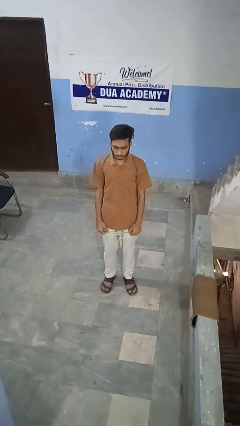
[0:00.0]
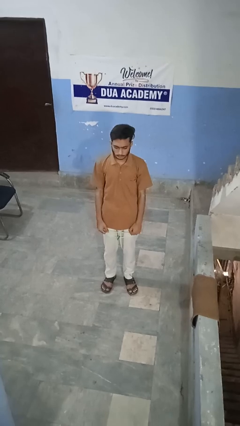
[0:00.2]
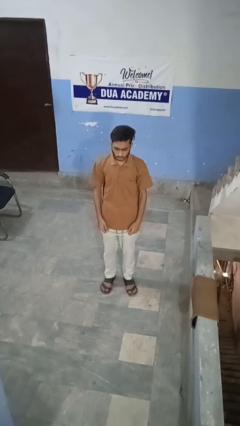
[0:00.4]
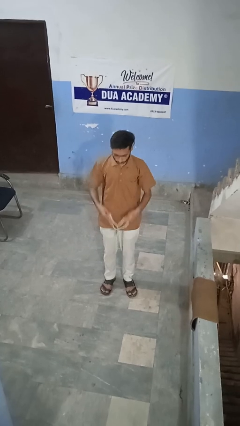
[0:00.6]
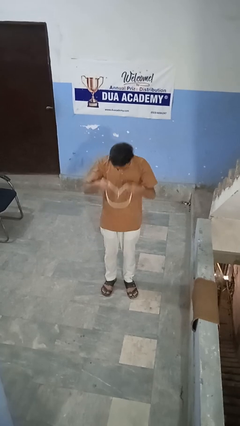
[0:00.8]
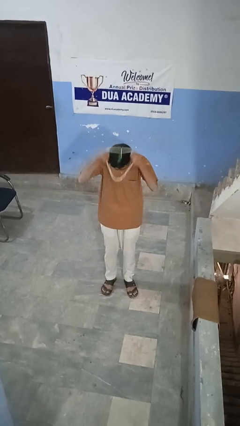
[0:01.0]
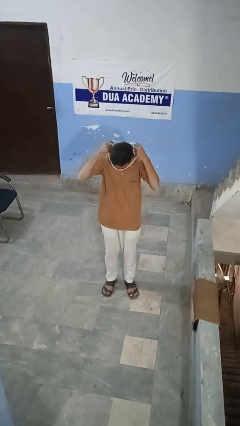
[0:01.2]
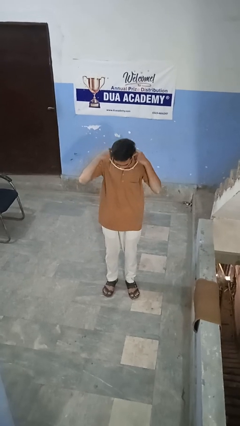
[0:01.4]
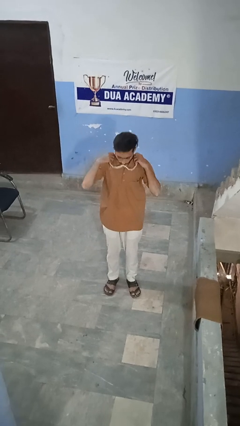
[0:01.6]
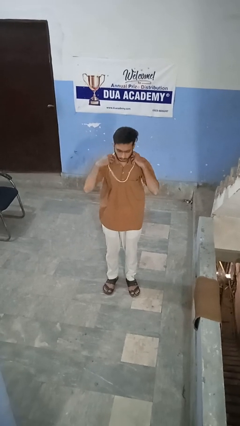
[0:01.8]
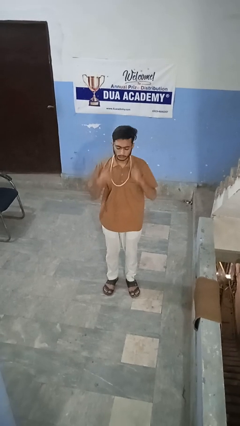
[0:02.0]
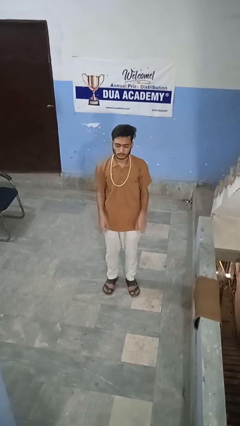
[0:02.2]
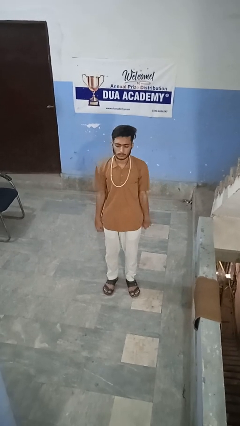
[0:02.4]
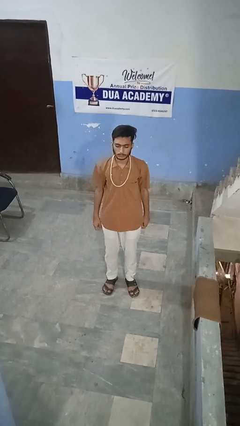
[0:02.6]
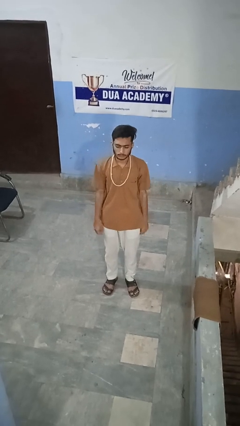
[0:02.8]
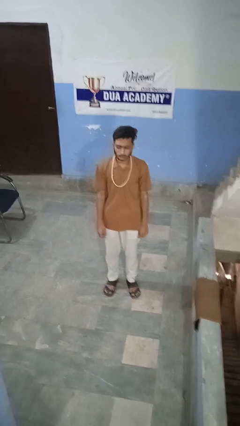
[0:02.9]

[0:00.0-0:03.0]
person puts on necklace

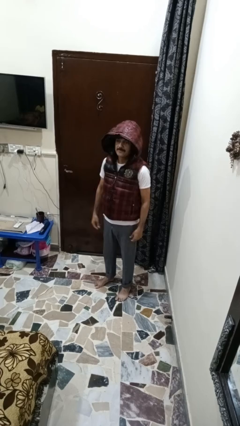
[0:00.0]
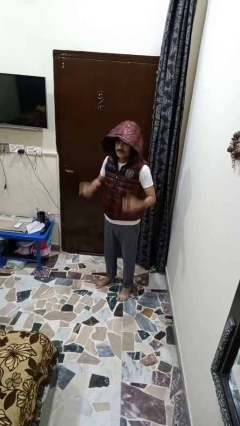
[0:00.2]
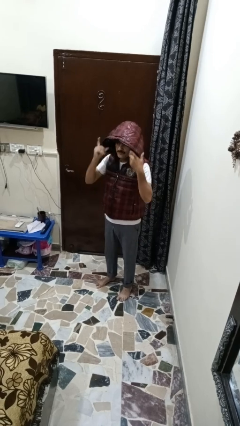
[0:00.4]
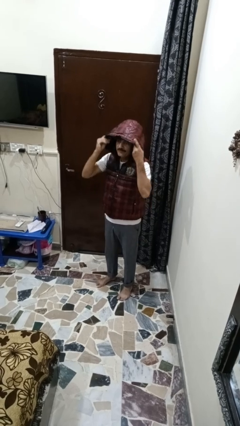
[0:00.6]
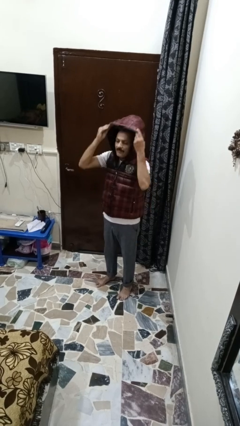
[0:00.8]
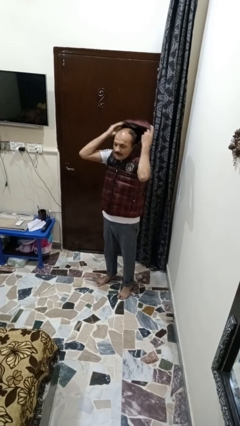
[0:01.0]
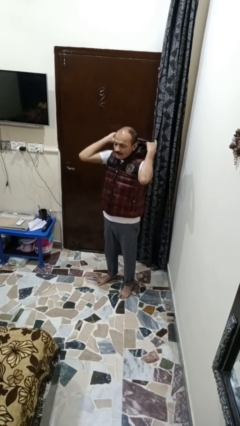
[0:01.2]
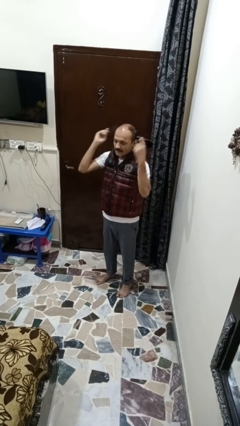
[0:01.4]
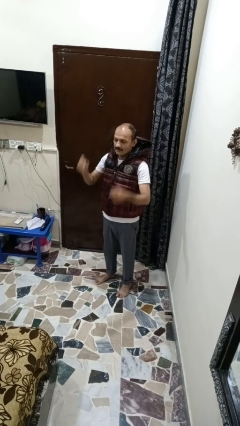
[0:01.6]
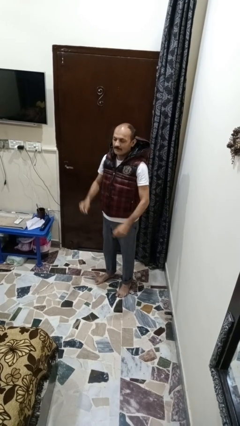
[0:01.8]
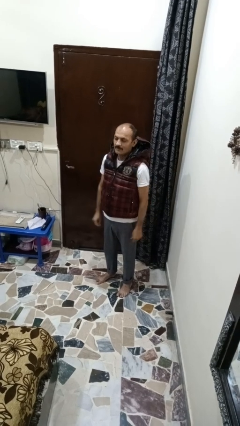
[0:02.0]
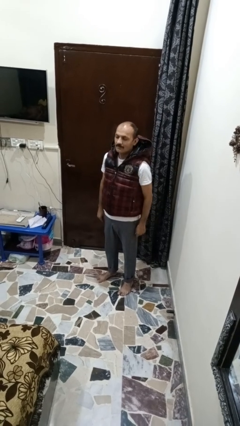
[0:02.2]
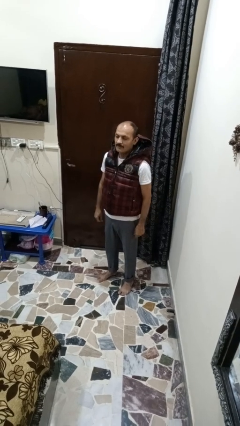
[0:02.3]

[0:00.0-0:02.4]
person takes off hoodie

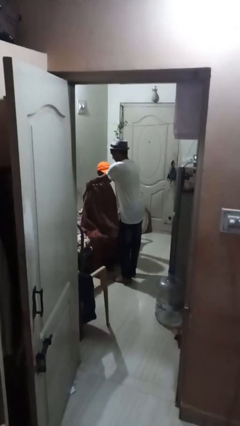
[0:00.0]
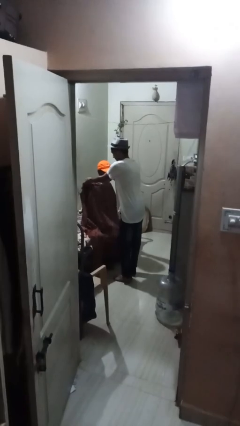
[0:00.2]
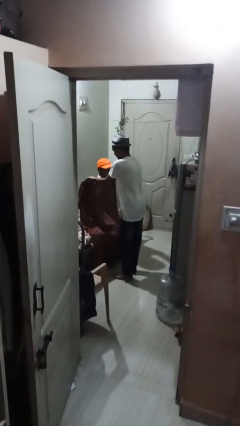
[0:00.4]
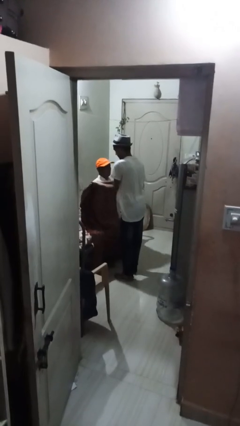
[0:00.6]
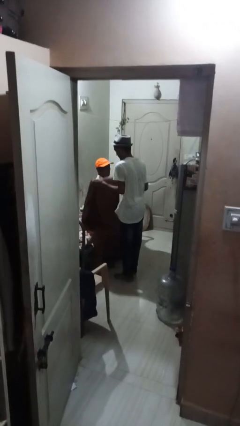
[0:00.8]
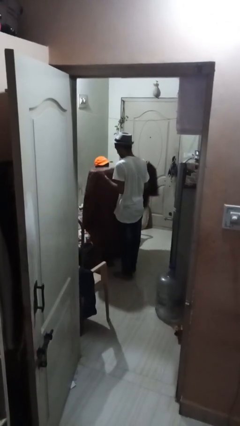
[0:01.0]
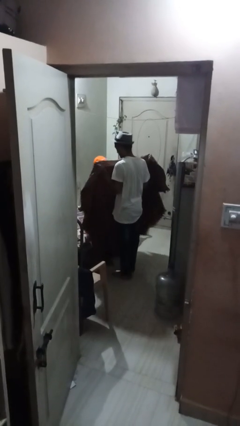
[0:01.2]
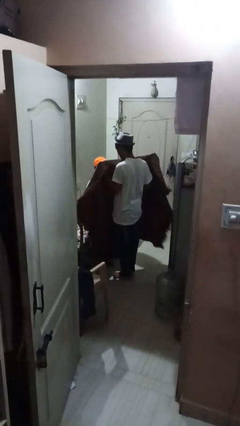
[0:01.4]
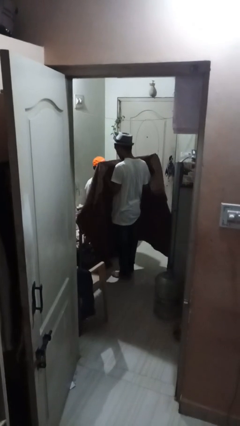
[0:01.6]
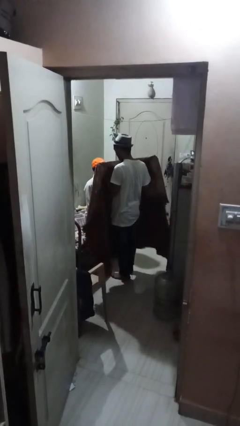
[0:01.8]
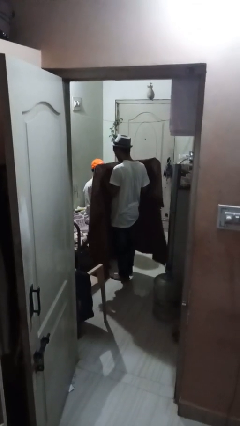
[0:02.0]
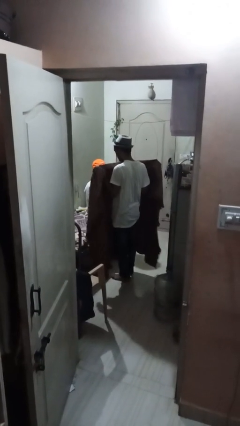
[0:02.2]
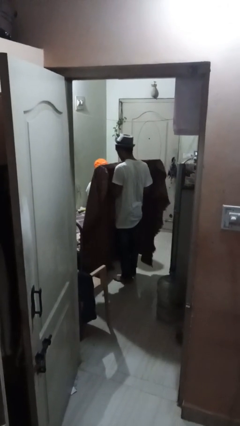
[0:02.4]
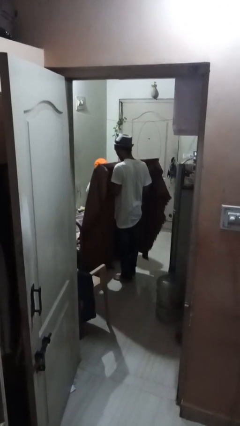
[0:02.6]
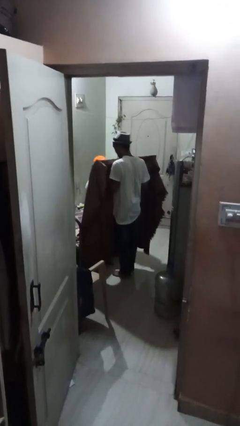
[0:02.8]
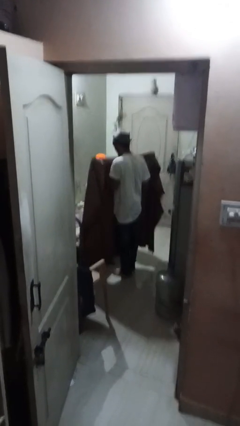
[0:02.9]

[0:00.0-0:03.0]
person uncovers friend with blanket

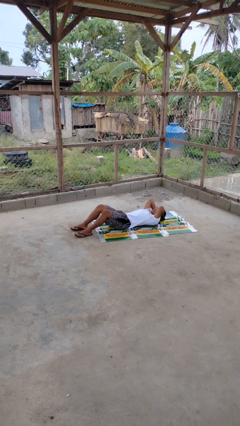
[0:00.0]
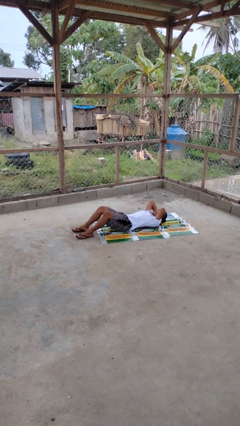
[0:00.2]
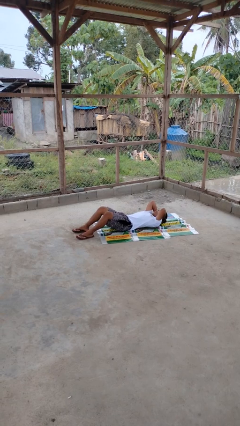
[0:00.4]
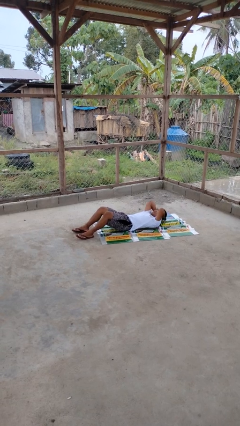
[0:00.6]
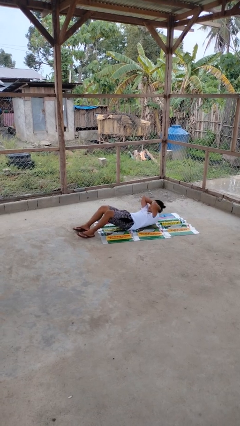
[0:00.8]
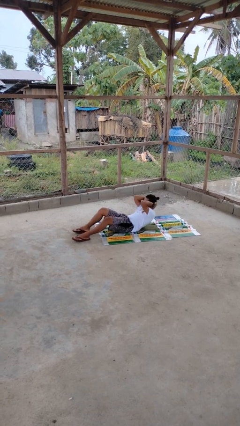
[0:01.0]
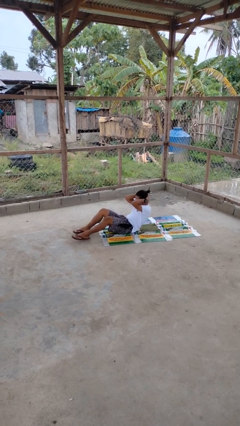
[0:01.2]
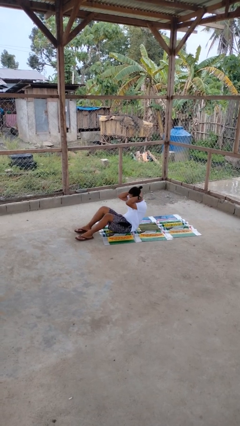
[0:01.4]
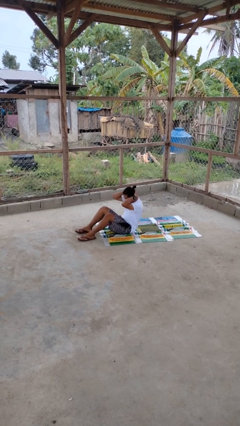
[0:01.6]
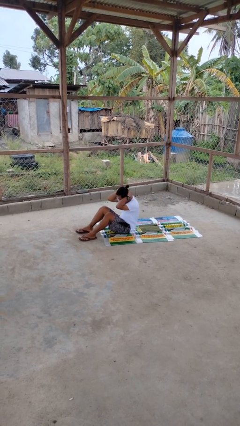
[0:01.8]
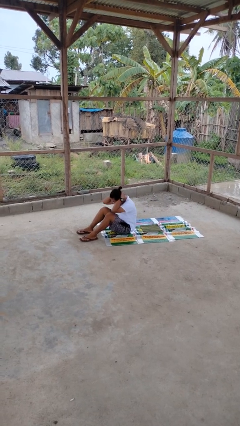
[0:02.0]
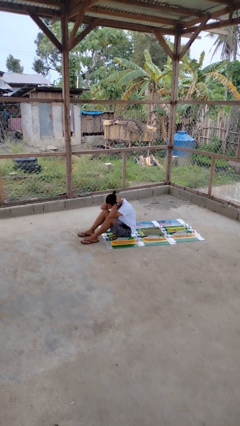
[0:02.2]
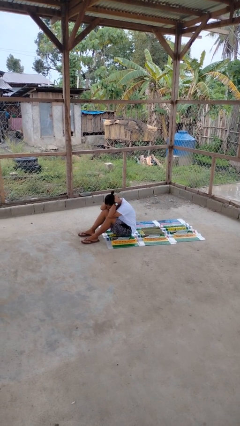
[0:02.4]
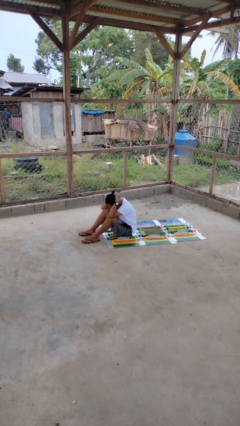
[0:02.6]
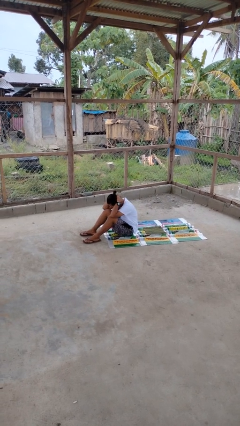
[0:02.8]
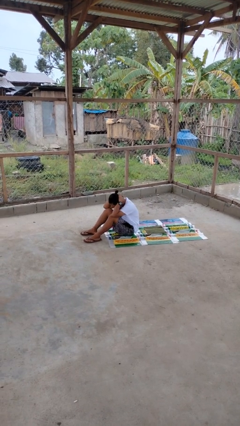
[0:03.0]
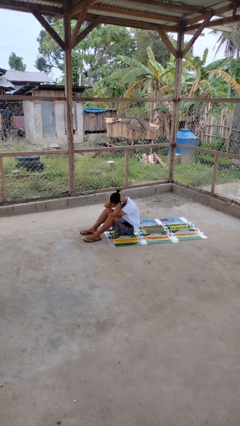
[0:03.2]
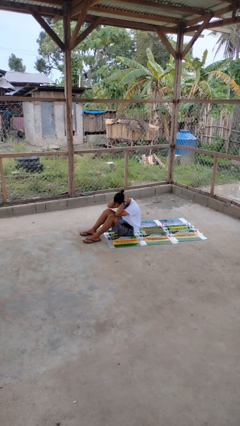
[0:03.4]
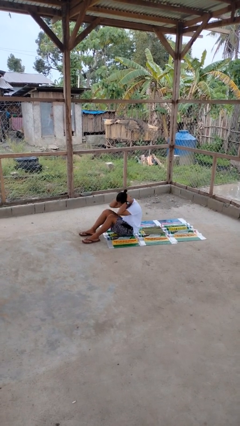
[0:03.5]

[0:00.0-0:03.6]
person exercises with situp

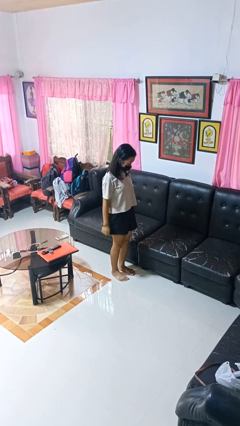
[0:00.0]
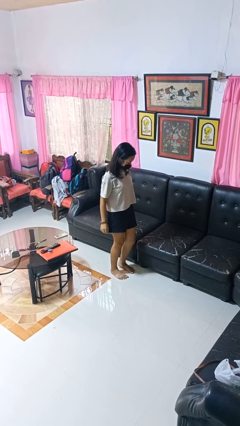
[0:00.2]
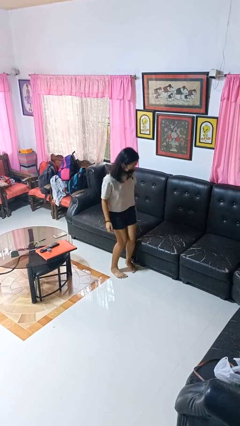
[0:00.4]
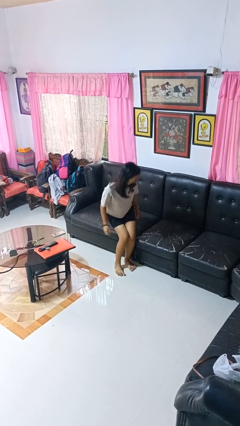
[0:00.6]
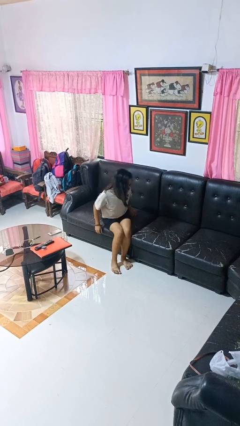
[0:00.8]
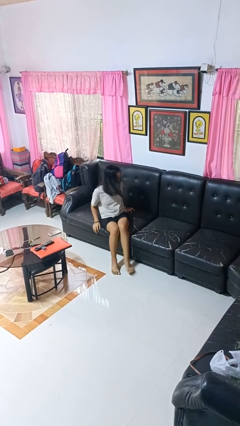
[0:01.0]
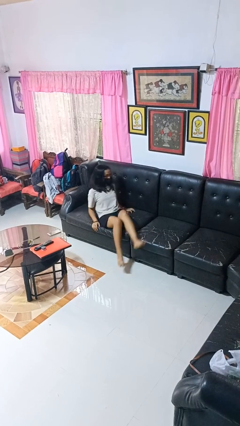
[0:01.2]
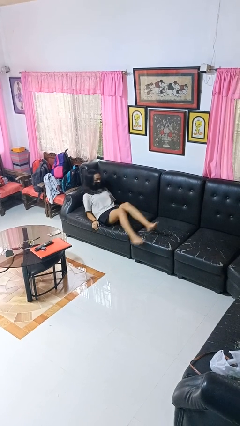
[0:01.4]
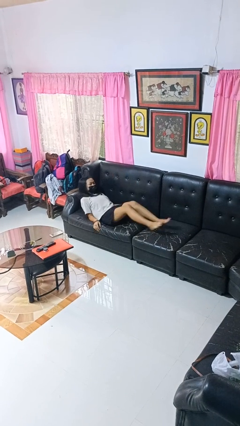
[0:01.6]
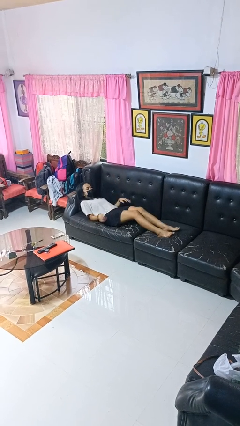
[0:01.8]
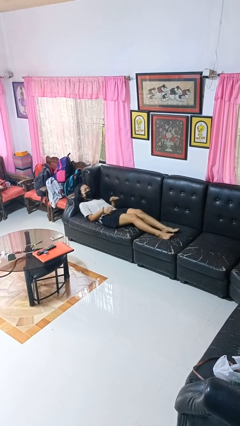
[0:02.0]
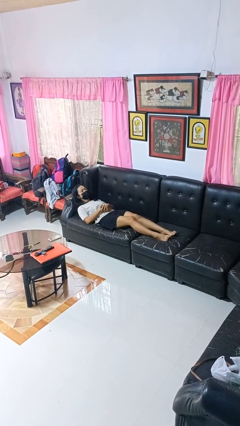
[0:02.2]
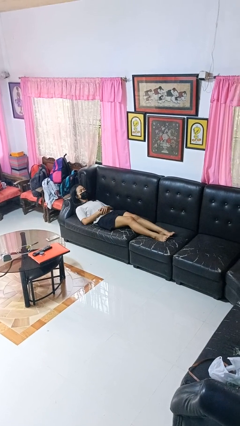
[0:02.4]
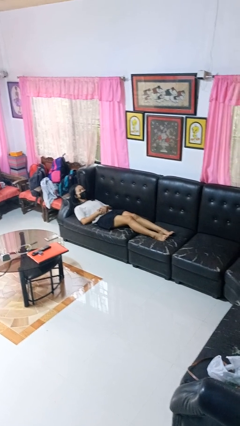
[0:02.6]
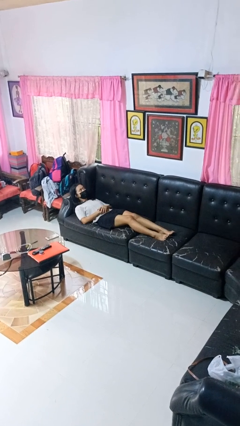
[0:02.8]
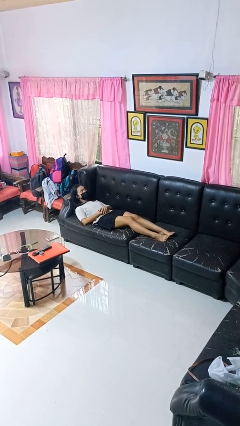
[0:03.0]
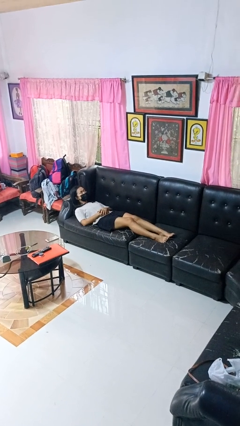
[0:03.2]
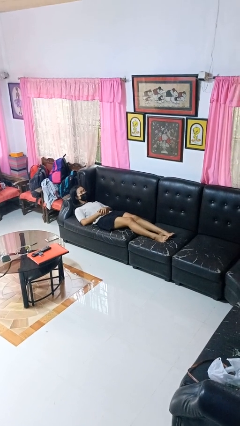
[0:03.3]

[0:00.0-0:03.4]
person lies down on couch

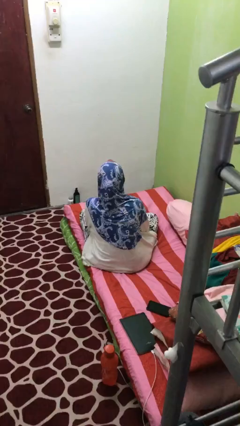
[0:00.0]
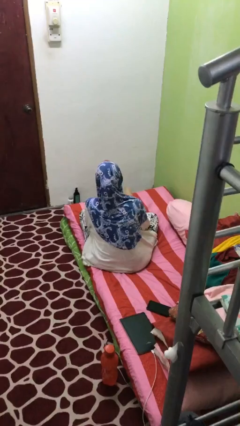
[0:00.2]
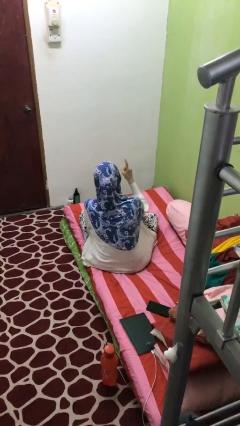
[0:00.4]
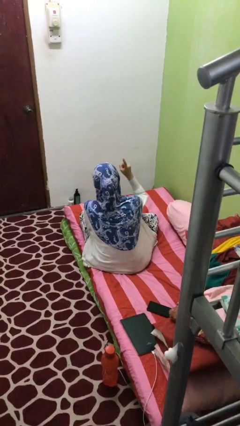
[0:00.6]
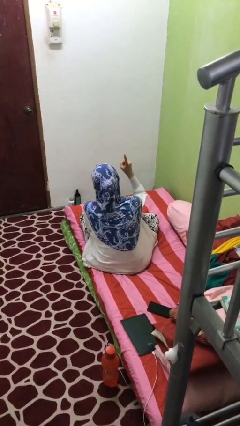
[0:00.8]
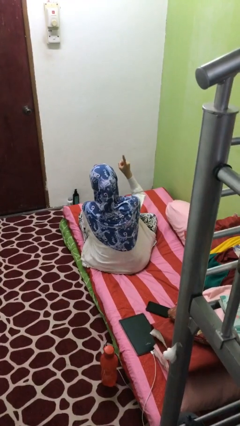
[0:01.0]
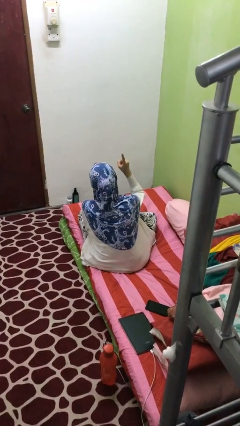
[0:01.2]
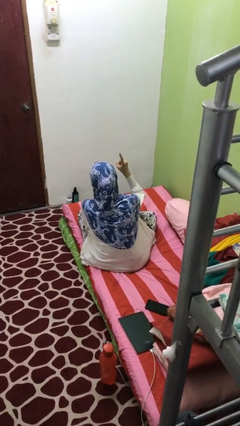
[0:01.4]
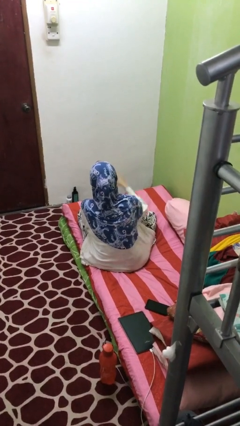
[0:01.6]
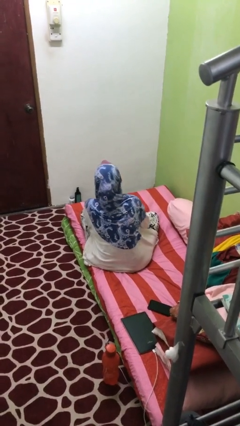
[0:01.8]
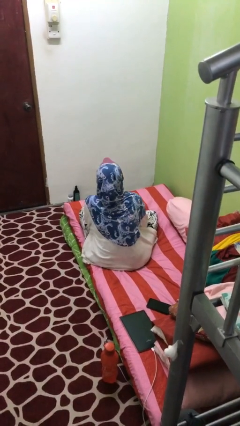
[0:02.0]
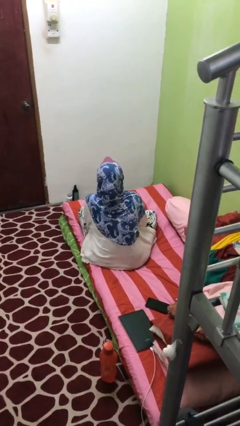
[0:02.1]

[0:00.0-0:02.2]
person gestures number one
